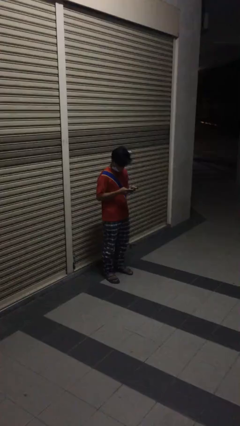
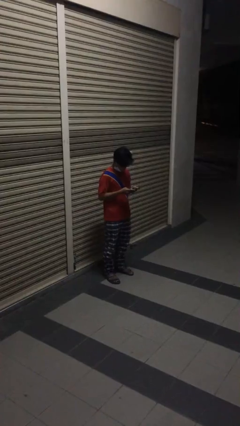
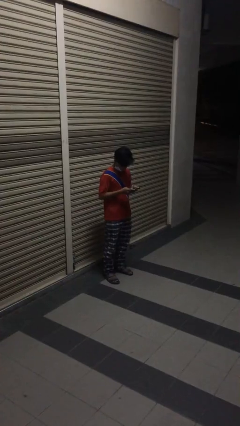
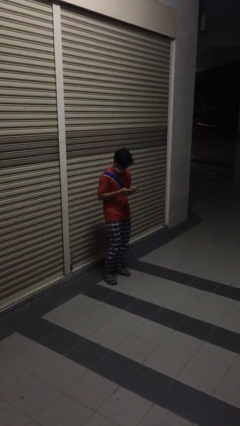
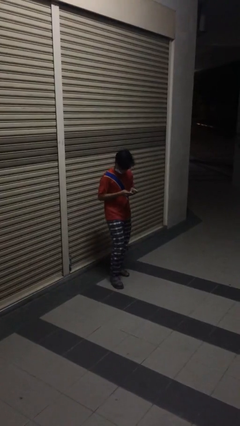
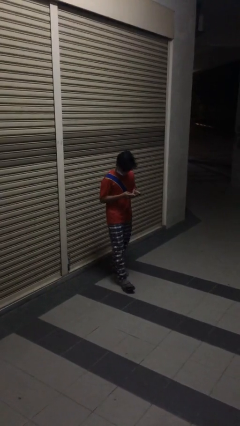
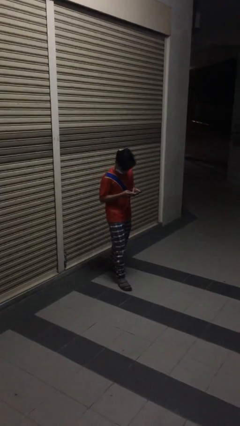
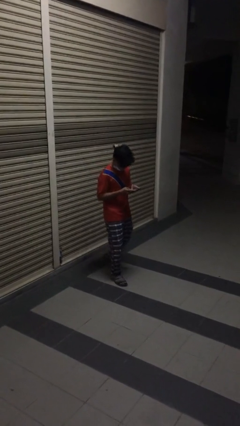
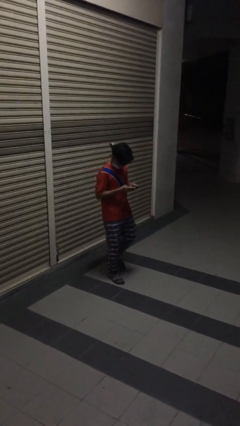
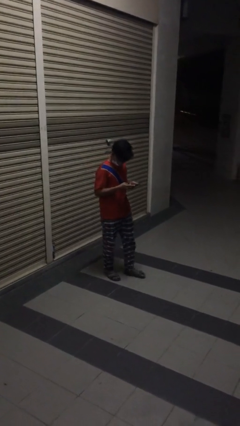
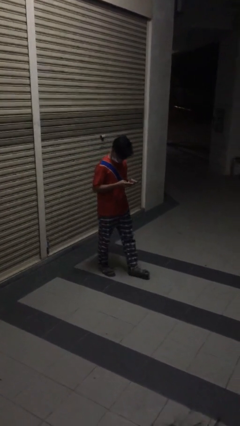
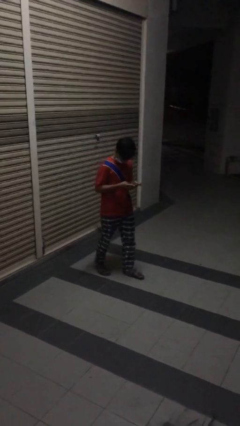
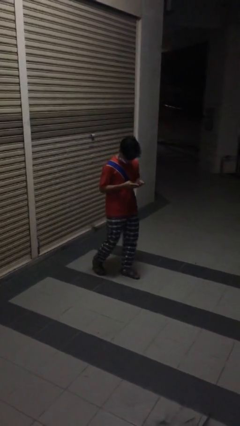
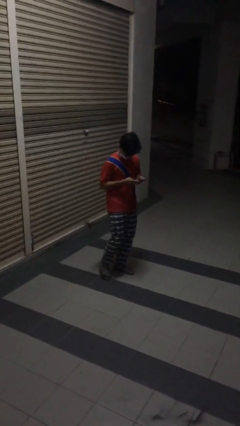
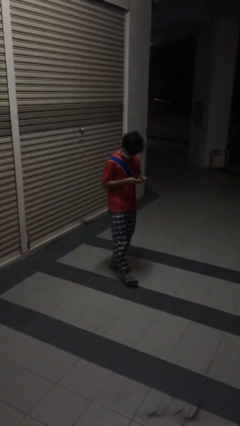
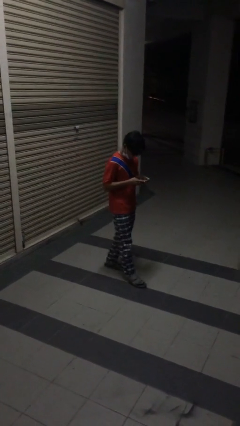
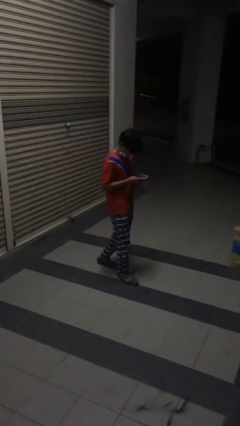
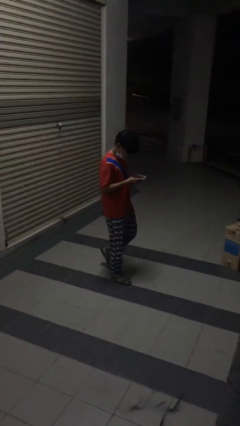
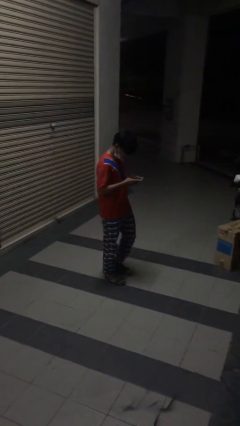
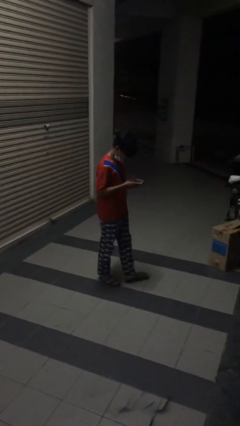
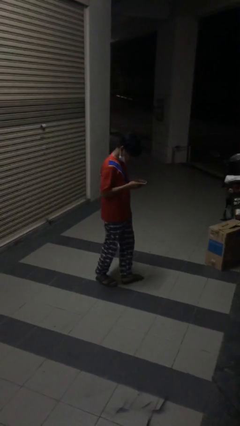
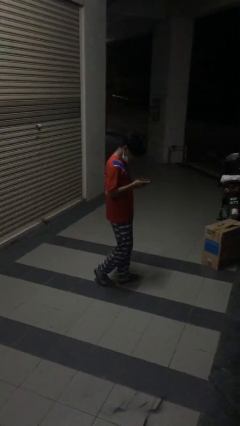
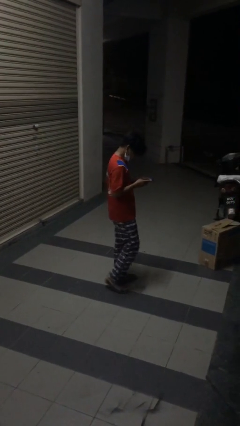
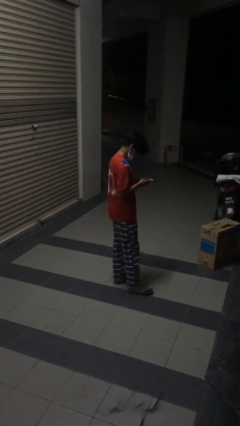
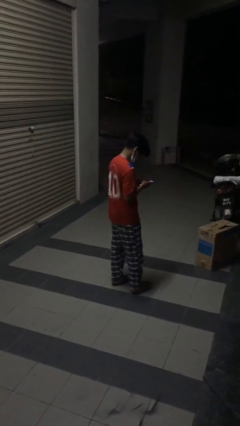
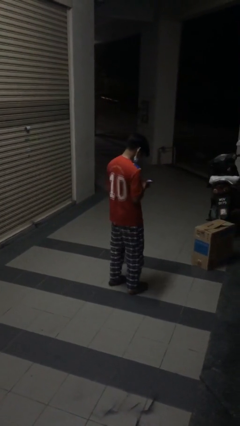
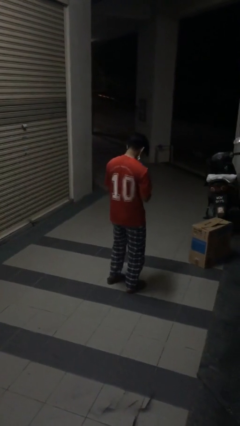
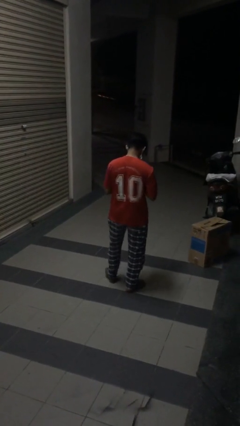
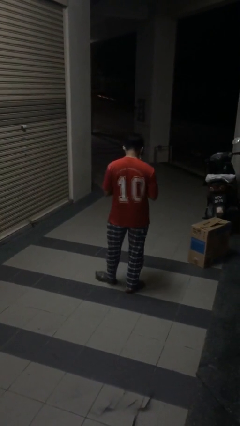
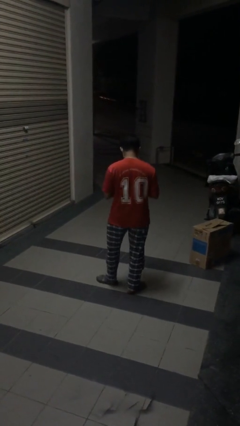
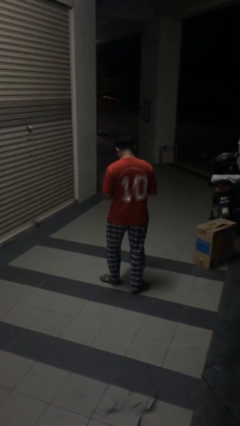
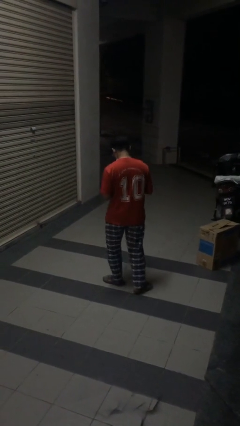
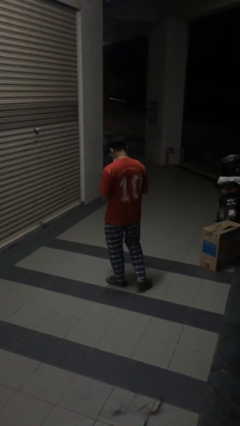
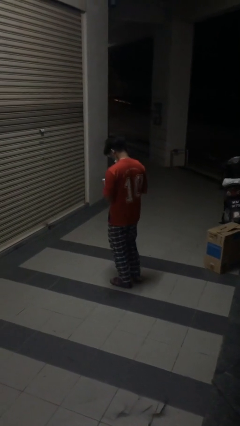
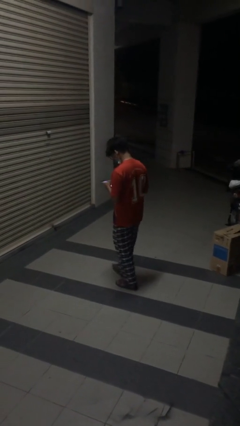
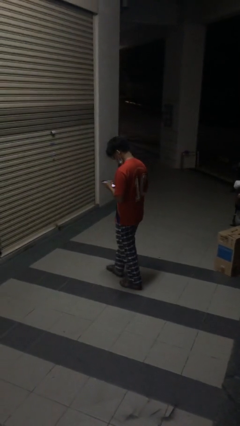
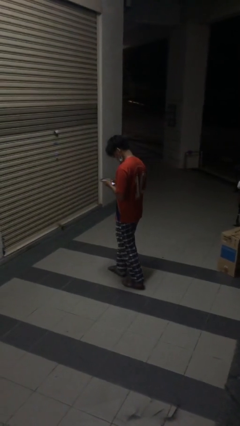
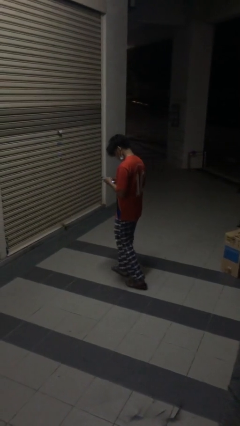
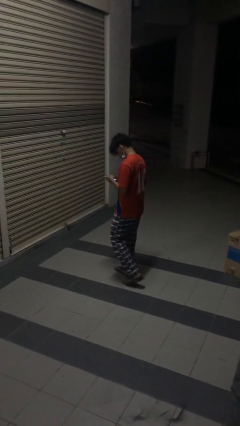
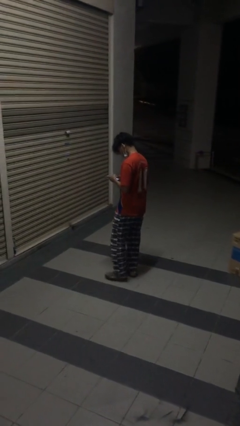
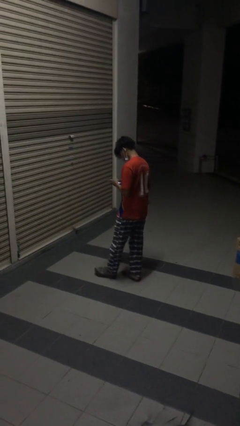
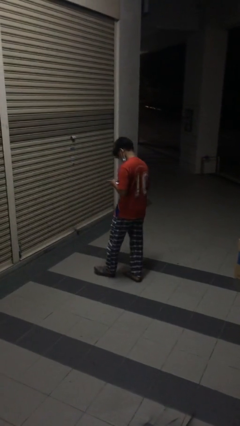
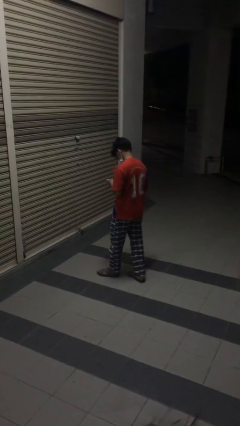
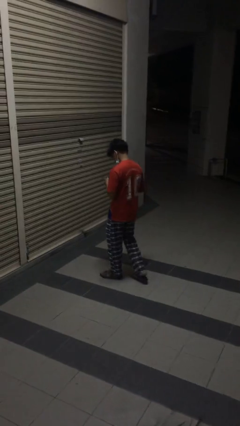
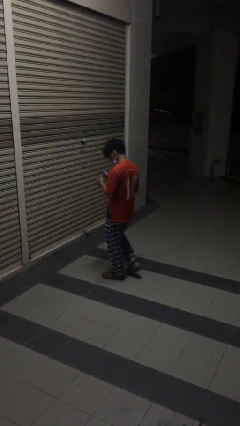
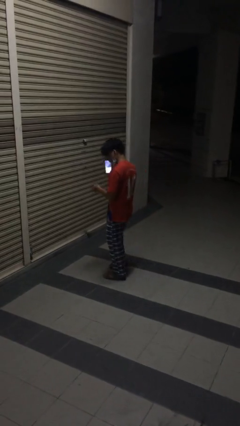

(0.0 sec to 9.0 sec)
person texts on phone

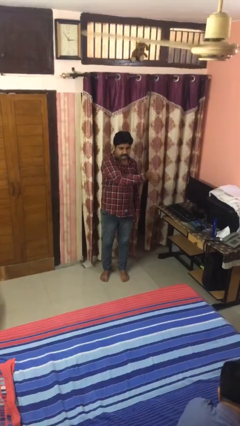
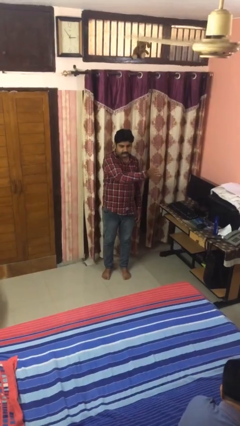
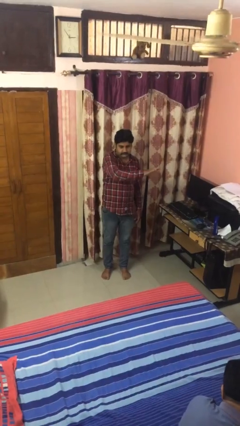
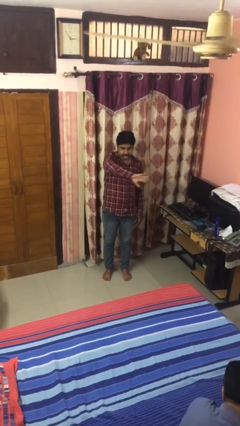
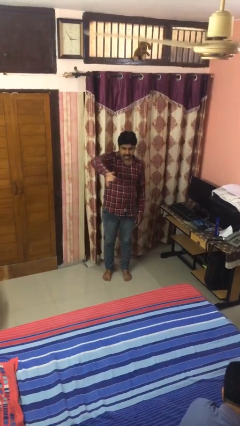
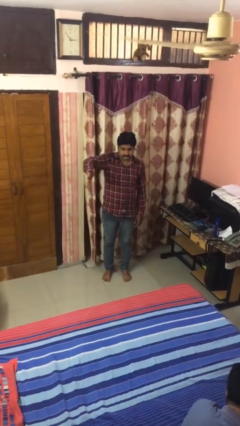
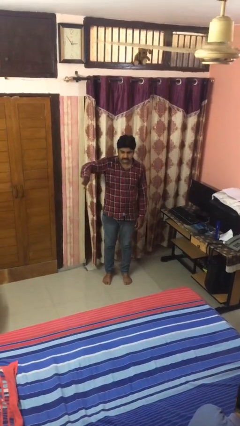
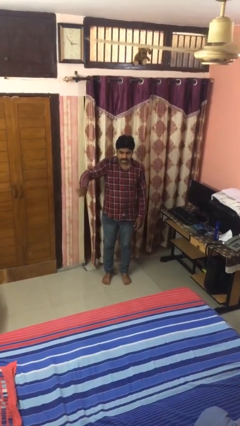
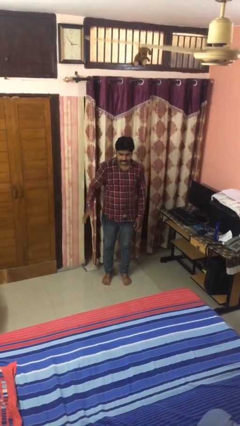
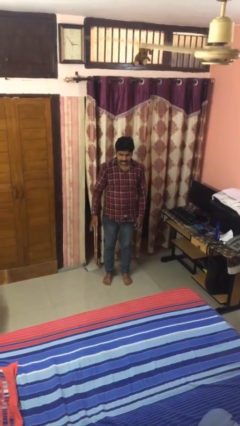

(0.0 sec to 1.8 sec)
person gestures swipe right

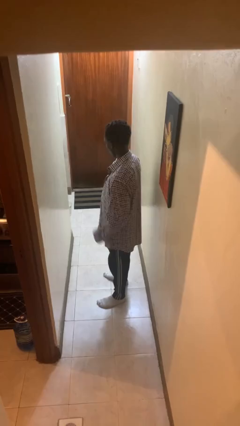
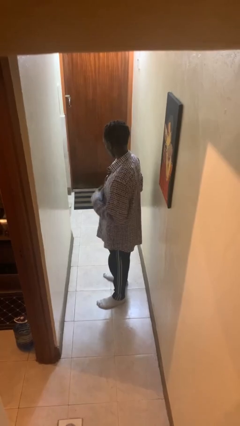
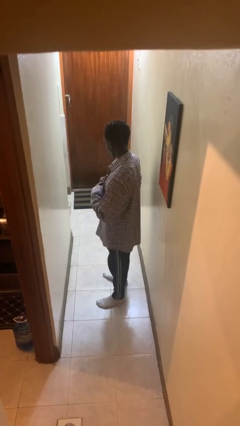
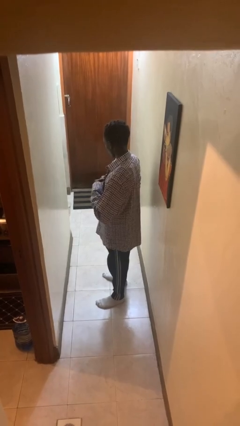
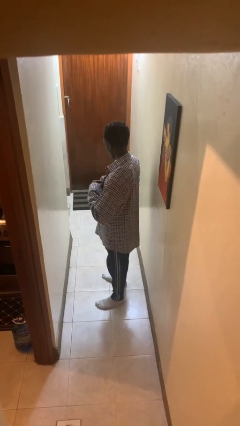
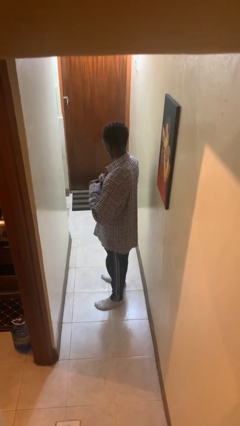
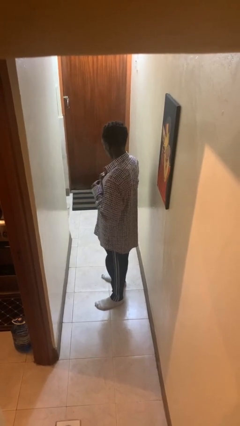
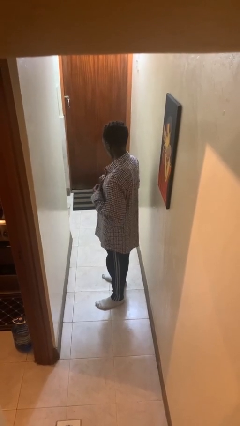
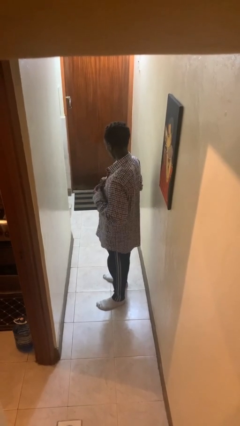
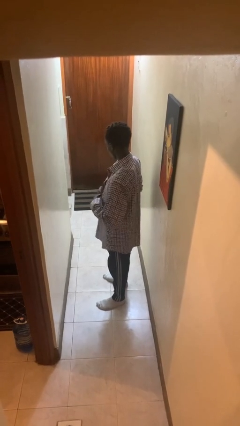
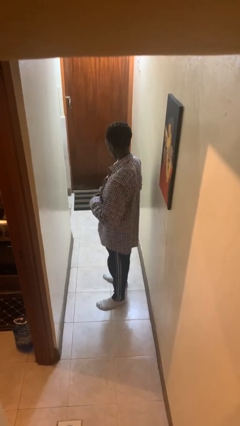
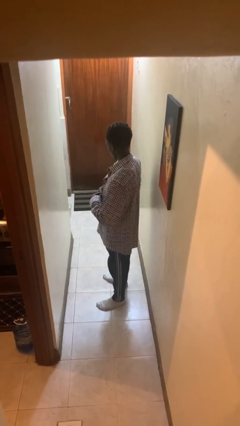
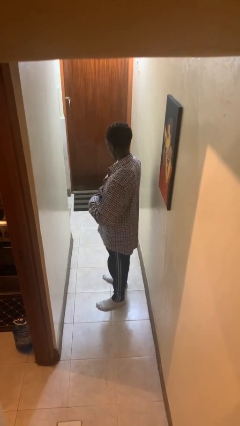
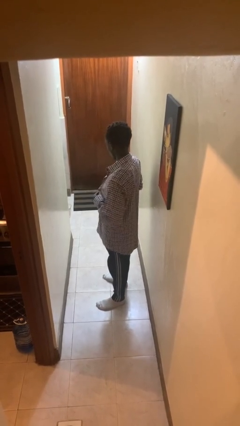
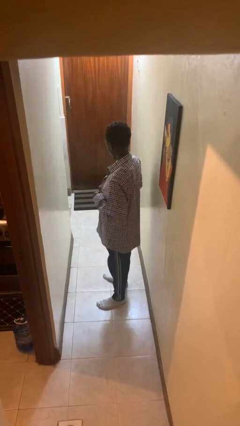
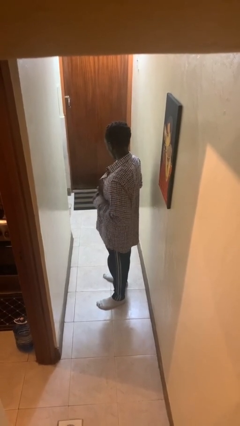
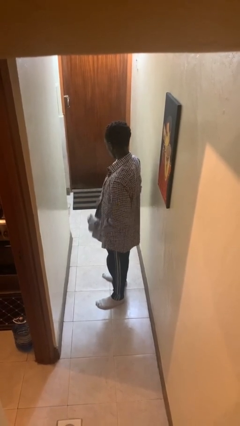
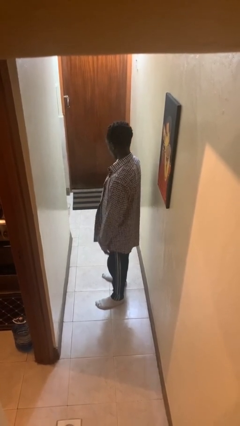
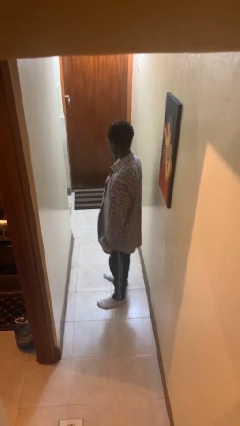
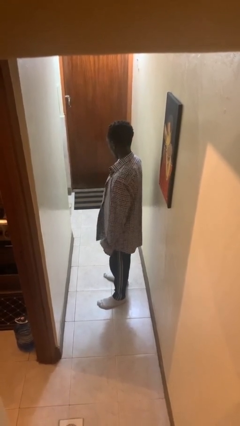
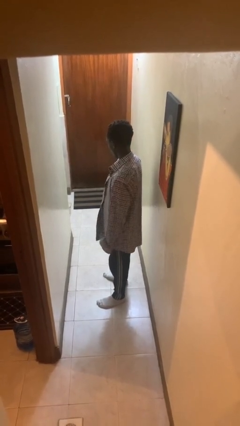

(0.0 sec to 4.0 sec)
person unbuttons shirt

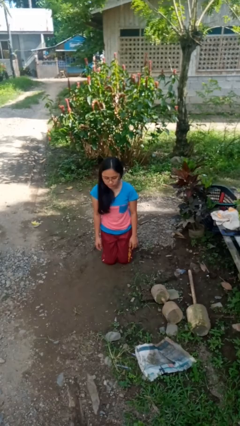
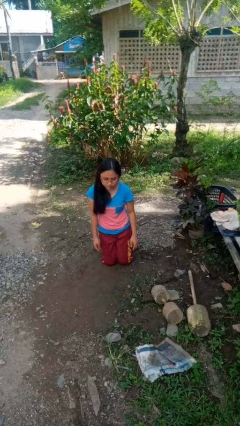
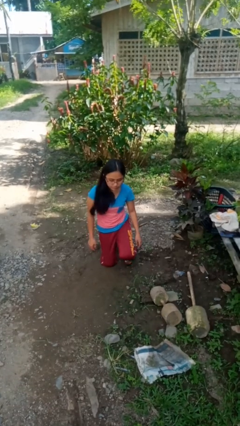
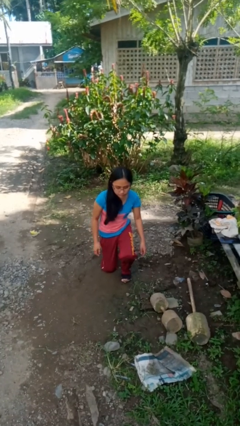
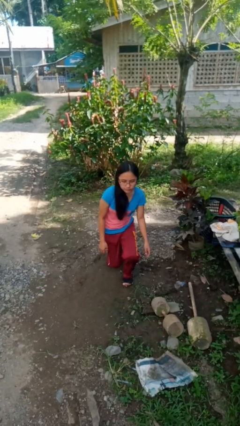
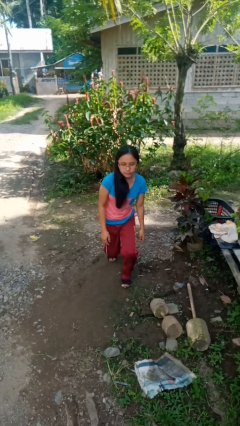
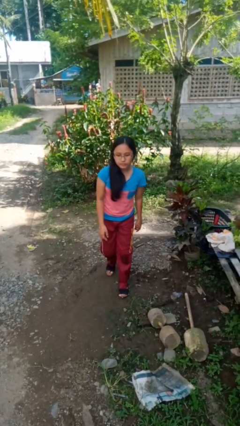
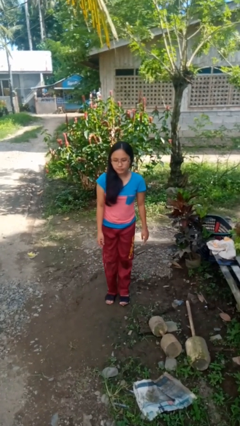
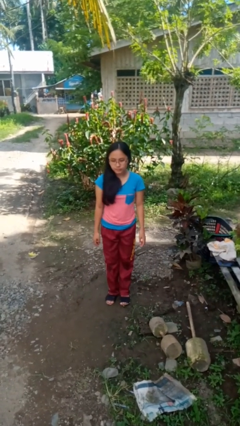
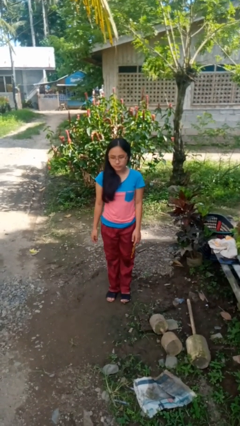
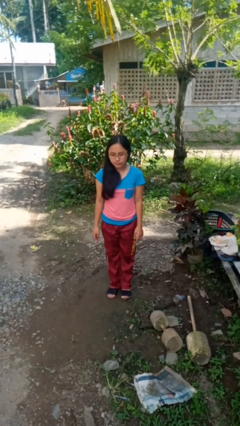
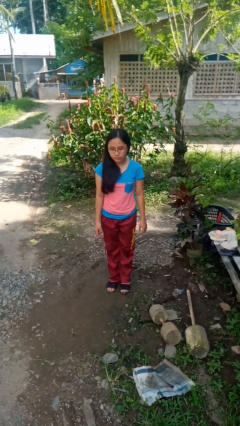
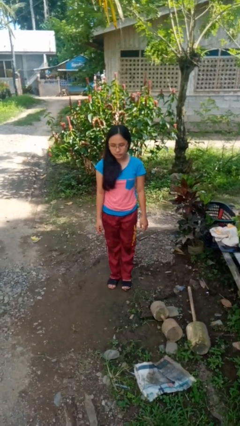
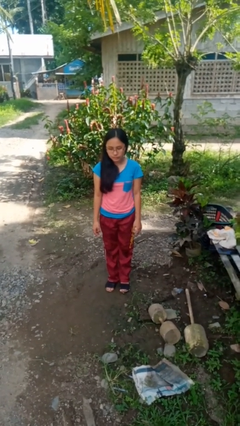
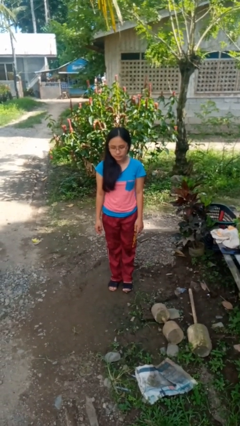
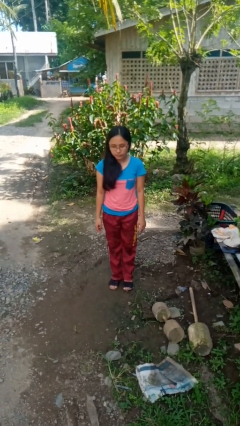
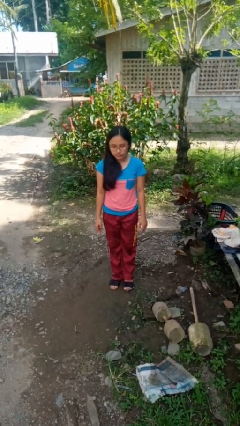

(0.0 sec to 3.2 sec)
person stands up from floor
